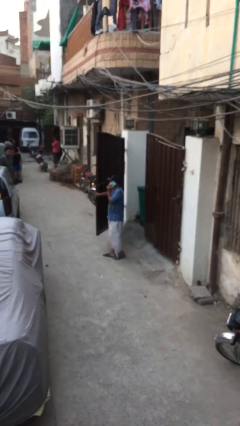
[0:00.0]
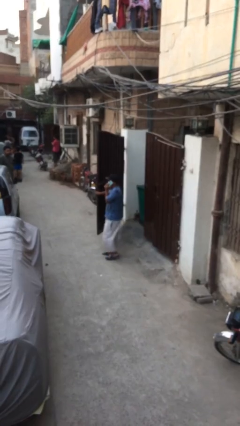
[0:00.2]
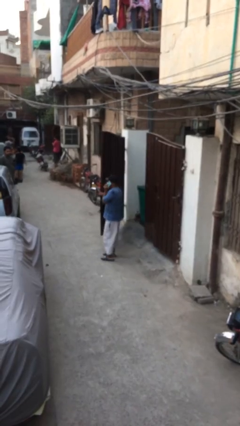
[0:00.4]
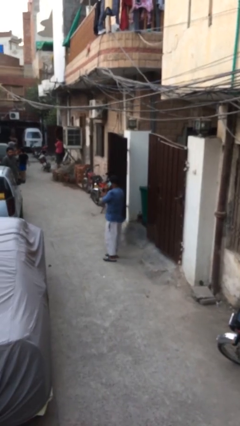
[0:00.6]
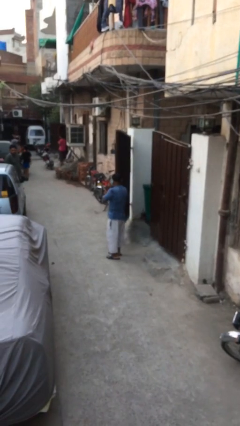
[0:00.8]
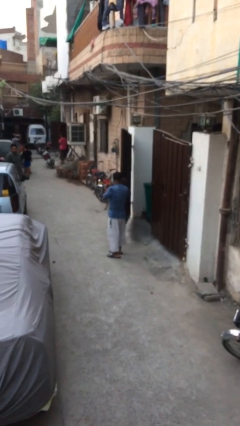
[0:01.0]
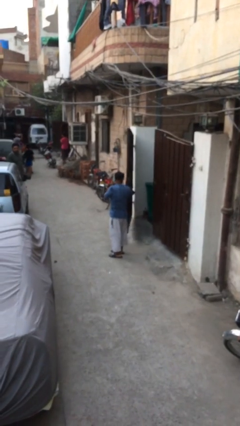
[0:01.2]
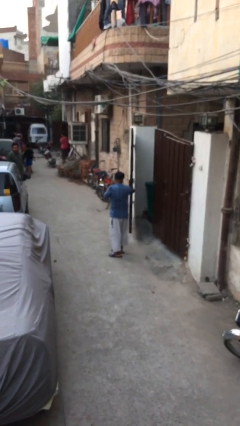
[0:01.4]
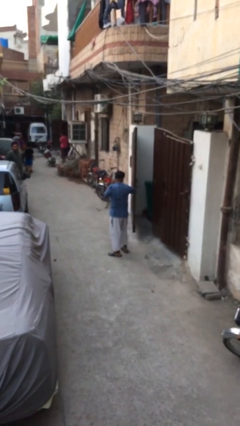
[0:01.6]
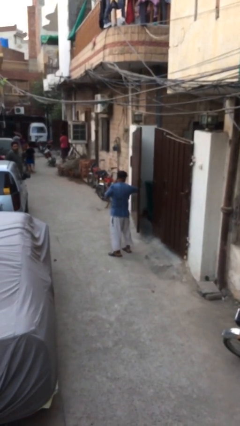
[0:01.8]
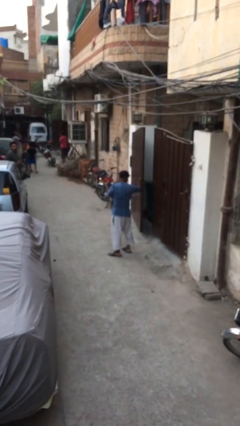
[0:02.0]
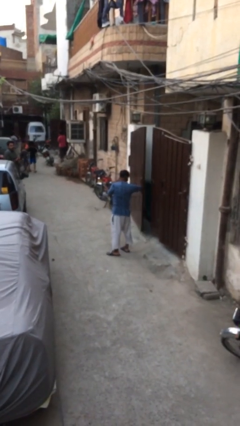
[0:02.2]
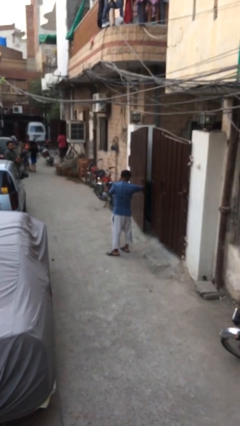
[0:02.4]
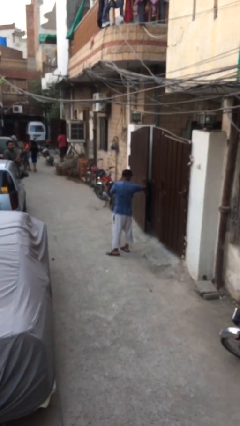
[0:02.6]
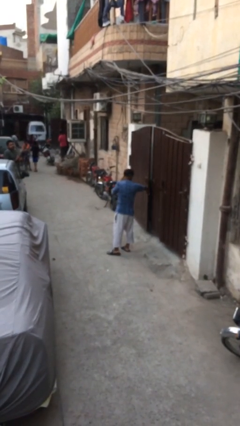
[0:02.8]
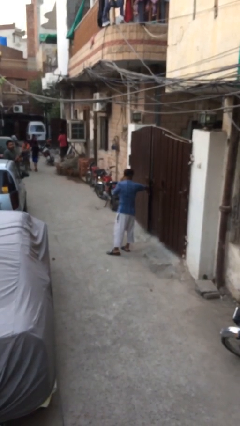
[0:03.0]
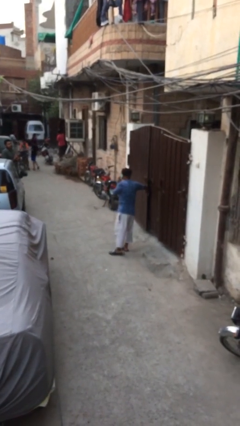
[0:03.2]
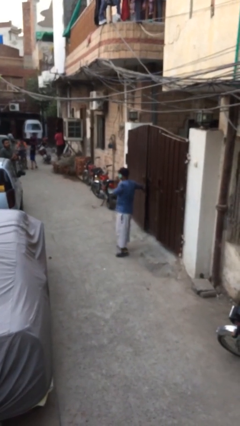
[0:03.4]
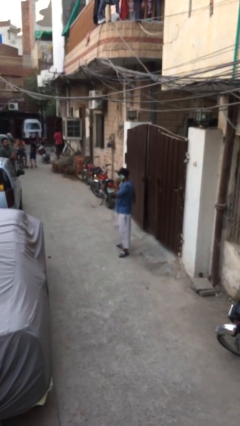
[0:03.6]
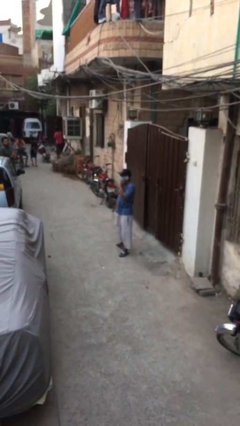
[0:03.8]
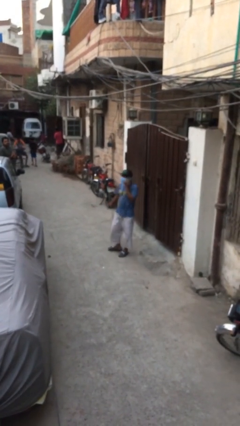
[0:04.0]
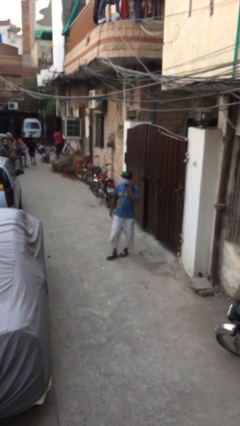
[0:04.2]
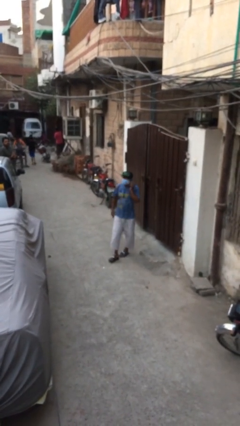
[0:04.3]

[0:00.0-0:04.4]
person closes facility door

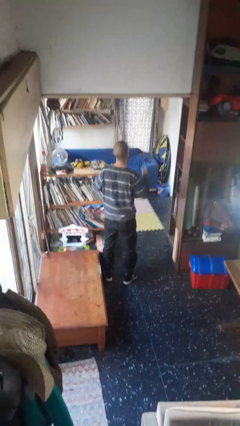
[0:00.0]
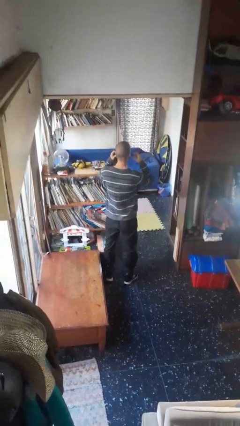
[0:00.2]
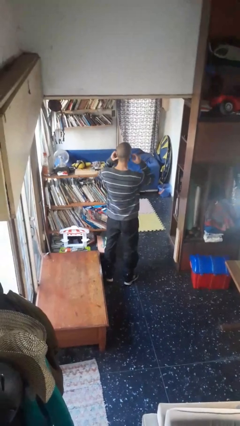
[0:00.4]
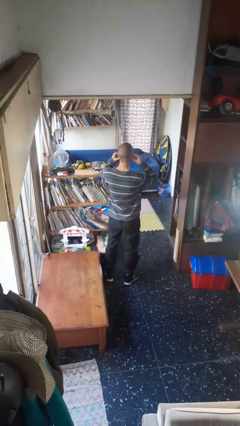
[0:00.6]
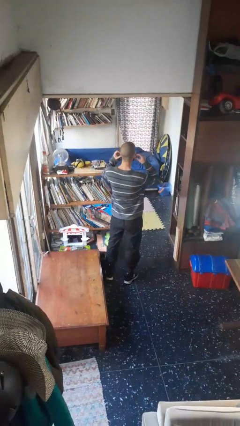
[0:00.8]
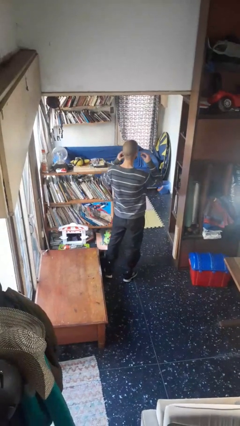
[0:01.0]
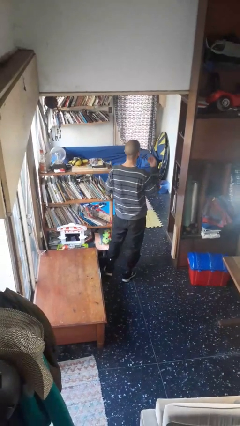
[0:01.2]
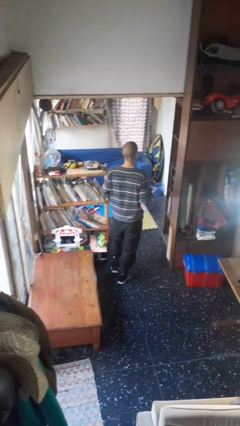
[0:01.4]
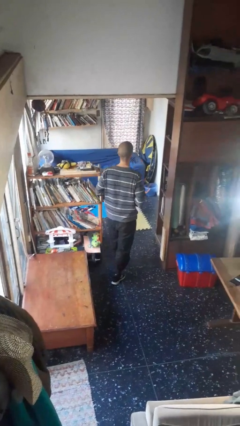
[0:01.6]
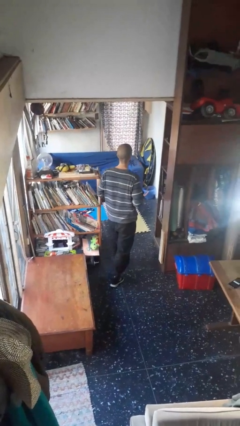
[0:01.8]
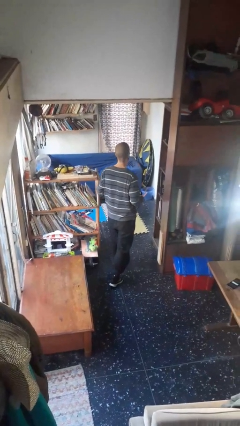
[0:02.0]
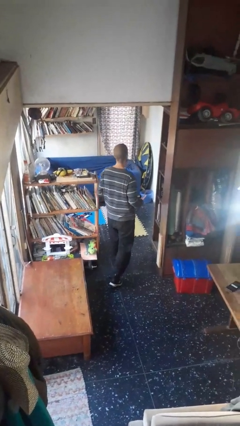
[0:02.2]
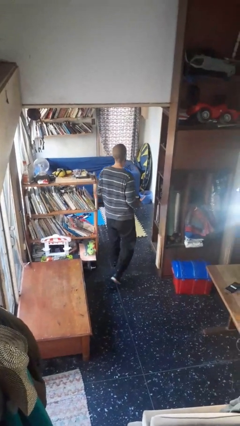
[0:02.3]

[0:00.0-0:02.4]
person takes off headphones

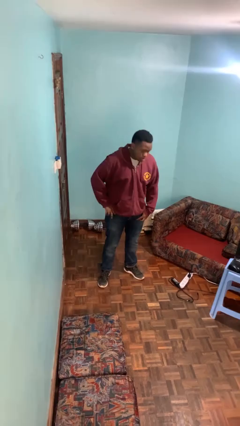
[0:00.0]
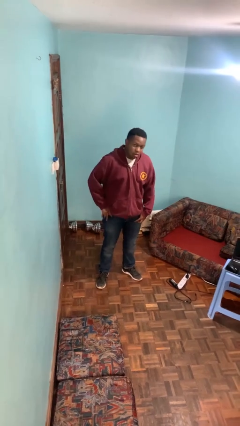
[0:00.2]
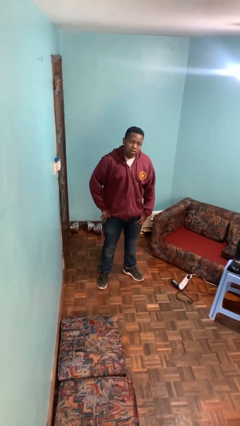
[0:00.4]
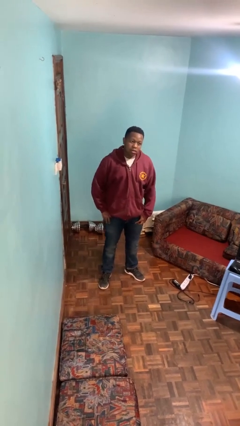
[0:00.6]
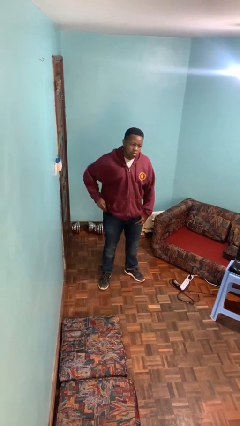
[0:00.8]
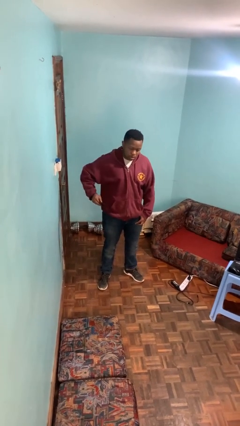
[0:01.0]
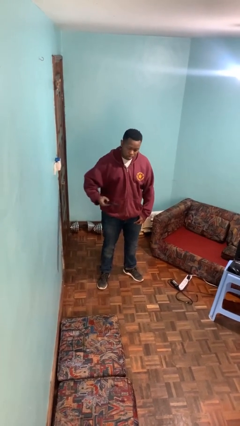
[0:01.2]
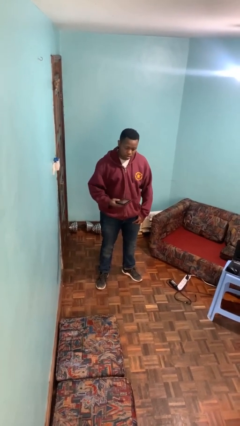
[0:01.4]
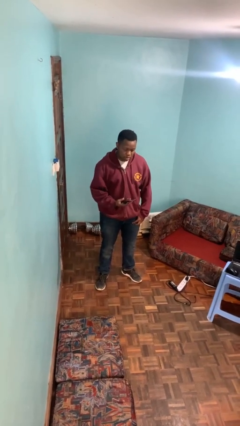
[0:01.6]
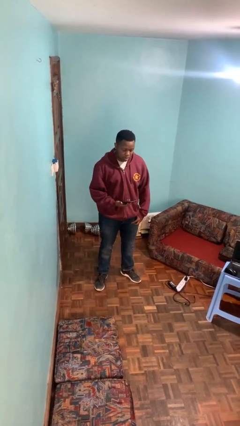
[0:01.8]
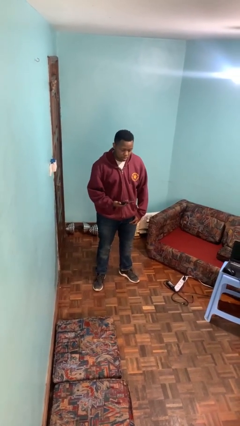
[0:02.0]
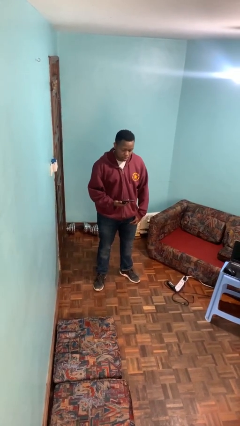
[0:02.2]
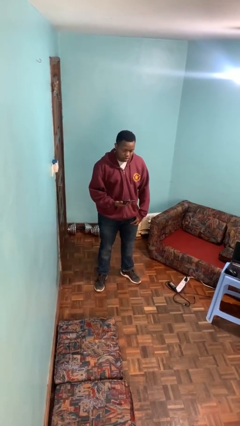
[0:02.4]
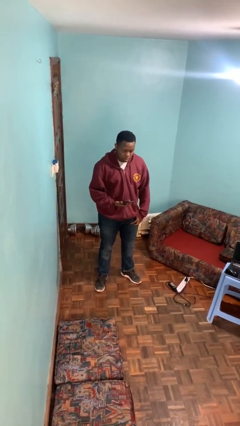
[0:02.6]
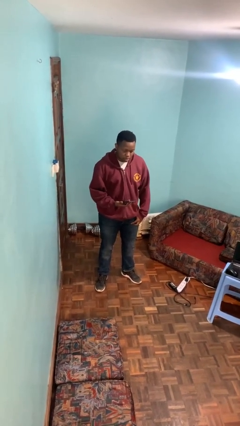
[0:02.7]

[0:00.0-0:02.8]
person takes phone from pocket

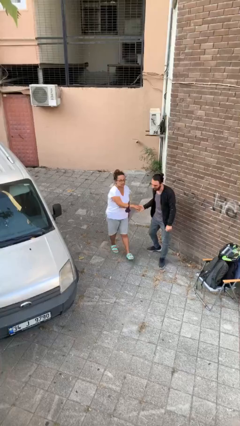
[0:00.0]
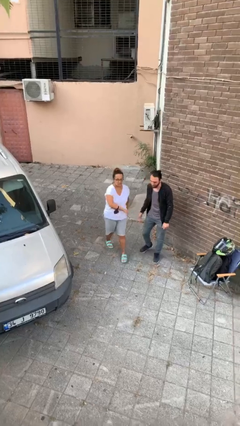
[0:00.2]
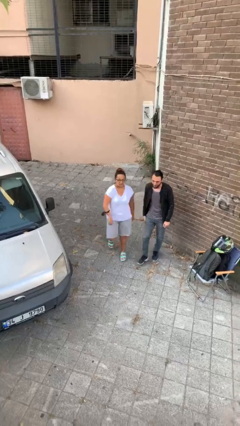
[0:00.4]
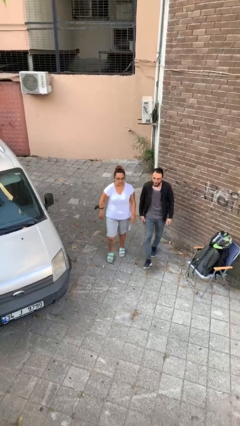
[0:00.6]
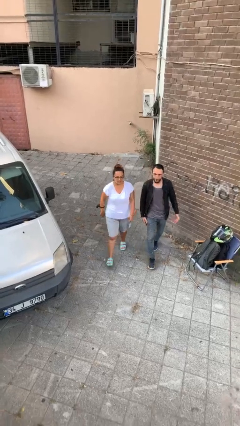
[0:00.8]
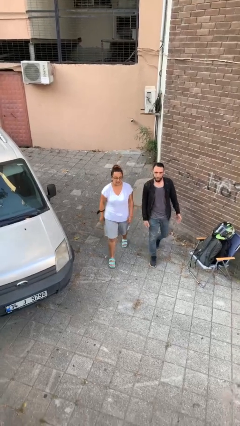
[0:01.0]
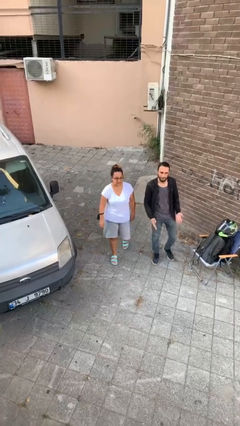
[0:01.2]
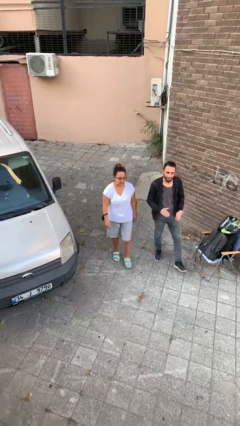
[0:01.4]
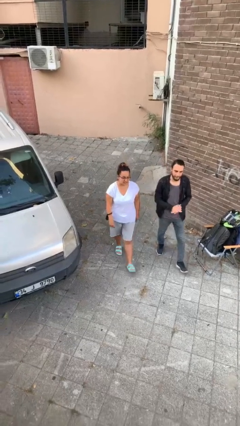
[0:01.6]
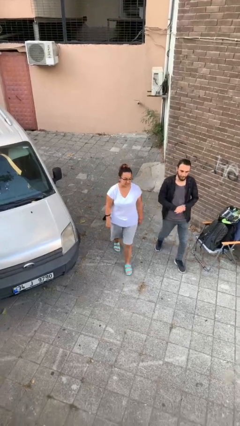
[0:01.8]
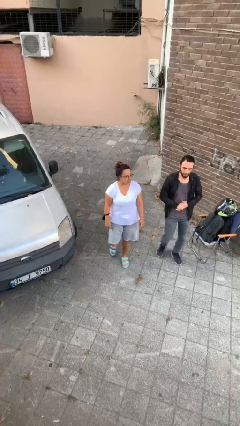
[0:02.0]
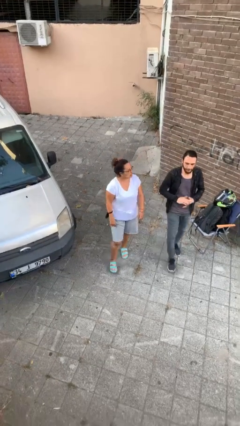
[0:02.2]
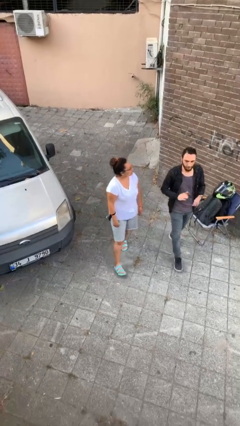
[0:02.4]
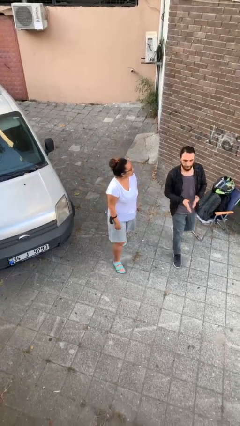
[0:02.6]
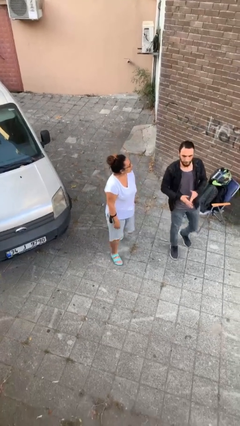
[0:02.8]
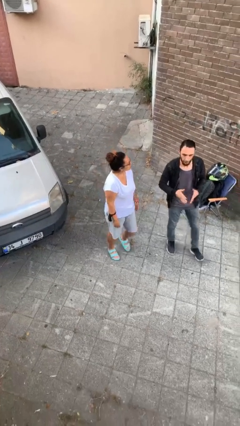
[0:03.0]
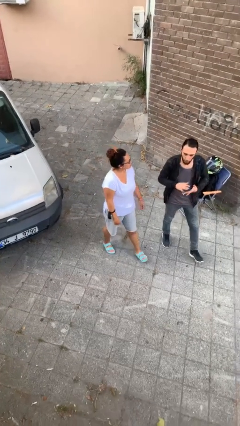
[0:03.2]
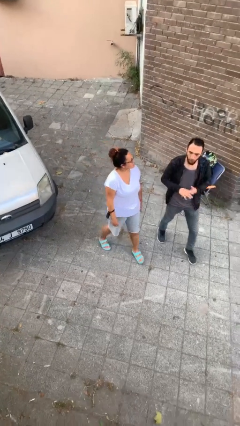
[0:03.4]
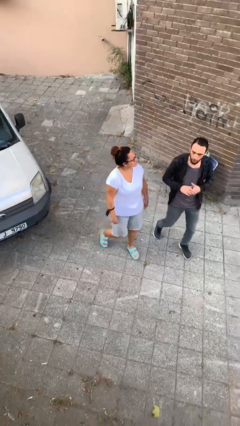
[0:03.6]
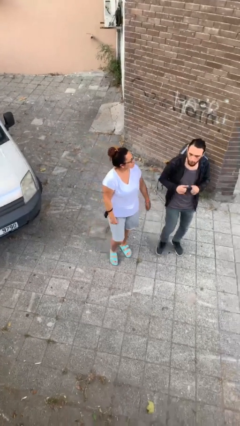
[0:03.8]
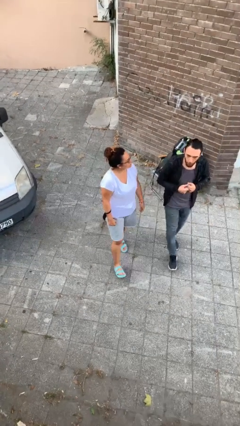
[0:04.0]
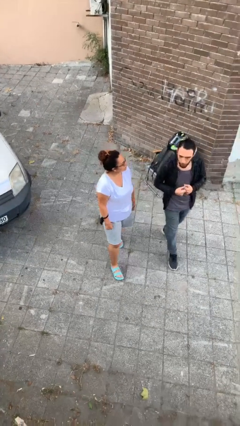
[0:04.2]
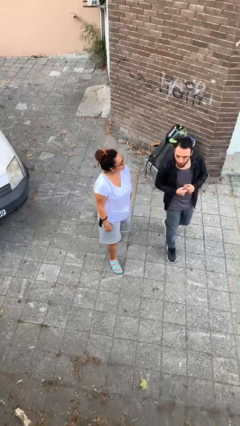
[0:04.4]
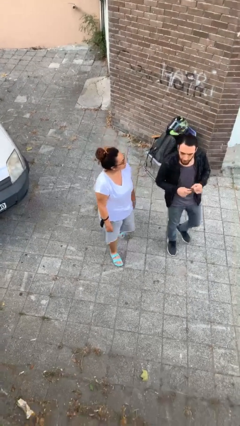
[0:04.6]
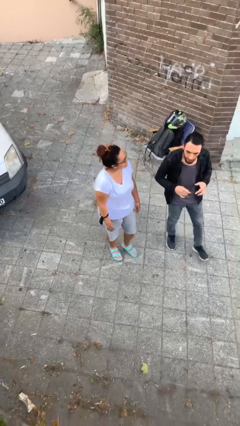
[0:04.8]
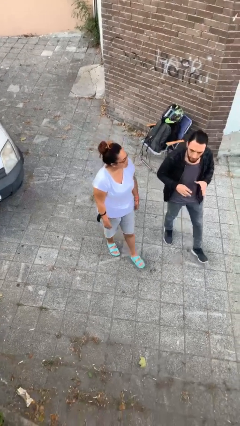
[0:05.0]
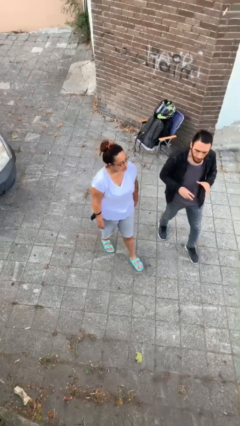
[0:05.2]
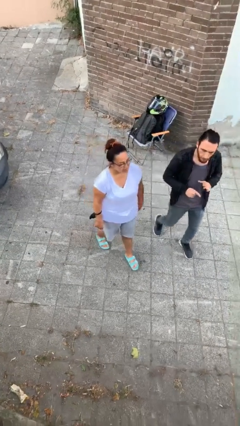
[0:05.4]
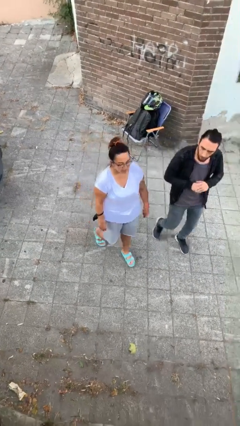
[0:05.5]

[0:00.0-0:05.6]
person talks to person

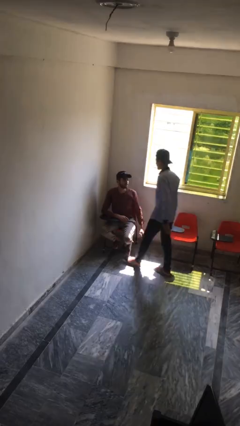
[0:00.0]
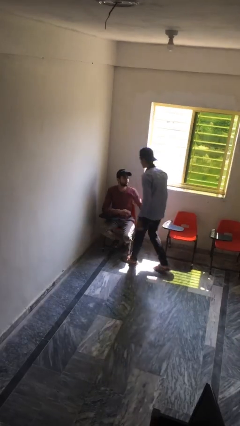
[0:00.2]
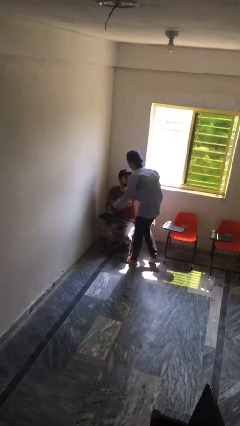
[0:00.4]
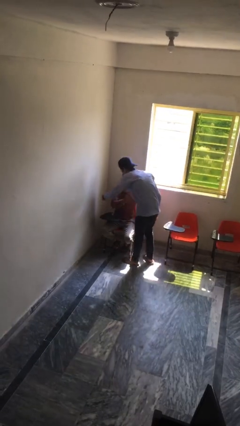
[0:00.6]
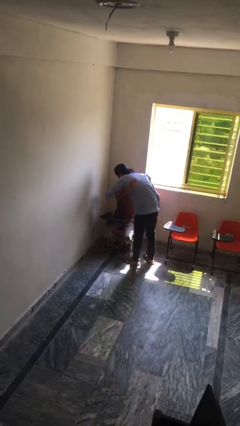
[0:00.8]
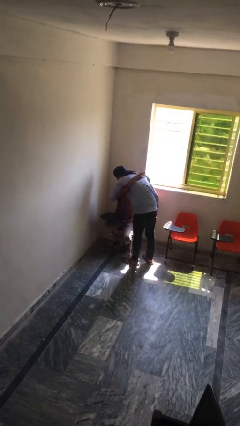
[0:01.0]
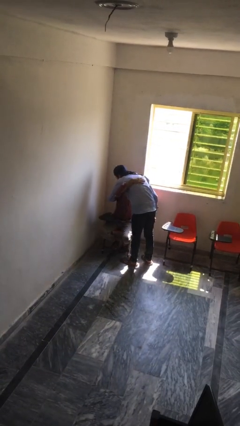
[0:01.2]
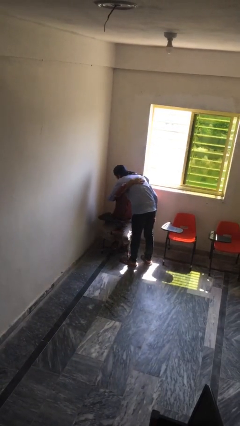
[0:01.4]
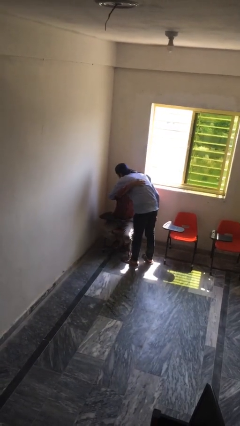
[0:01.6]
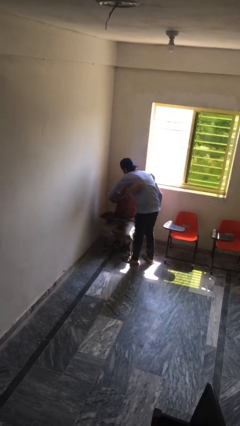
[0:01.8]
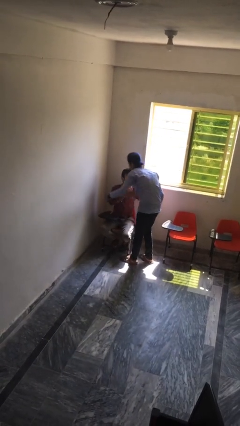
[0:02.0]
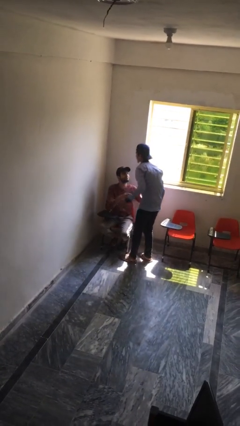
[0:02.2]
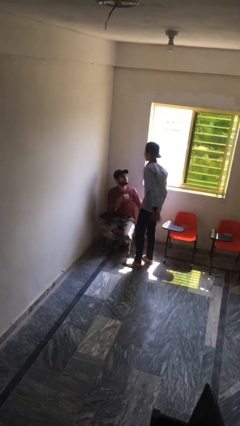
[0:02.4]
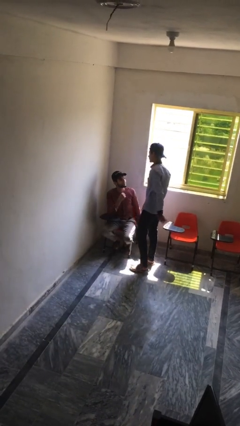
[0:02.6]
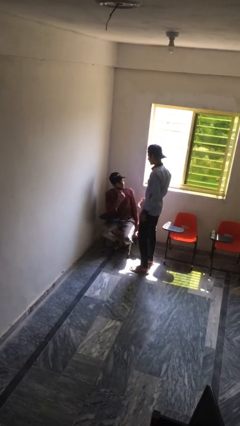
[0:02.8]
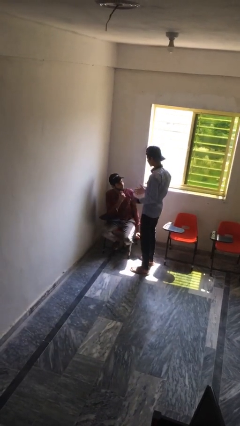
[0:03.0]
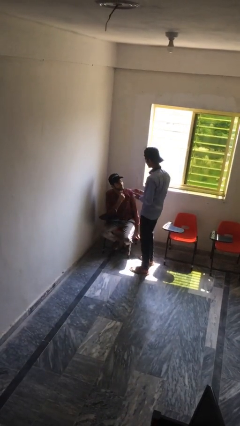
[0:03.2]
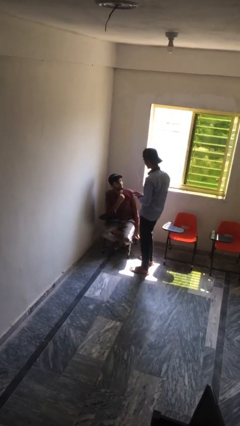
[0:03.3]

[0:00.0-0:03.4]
person embraces person
